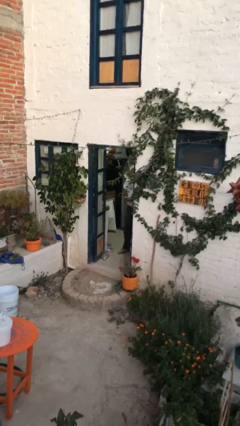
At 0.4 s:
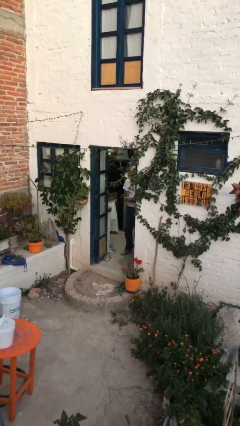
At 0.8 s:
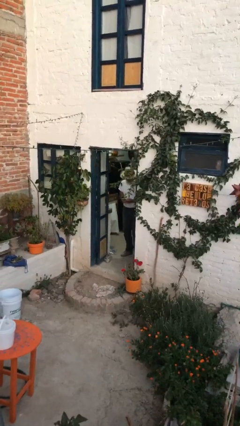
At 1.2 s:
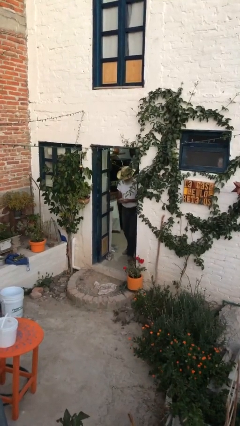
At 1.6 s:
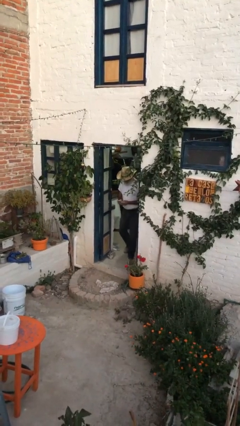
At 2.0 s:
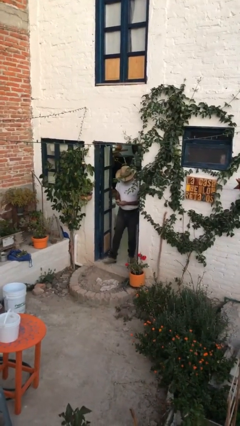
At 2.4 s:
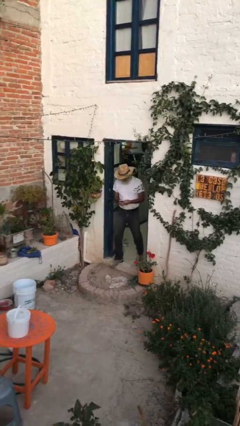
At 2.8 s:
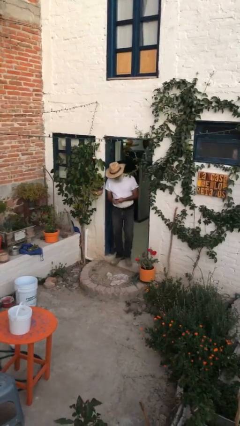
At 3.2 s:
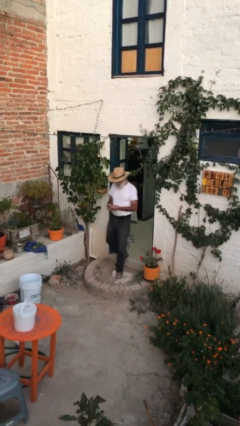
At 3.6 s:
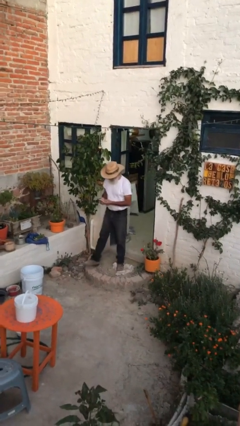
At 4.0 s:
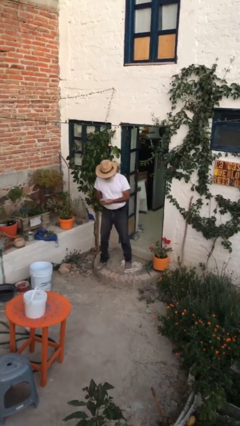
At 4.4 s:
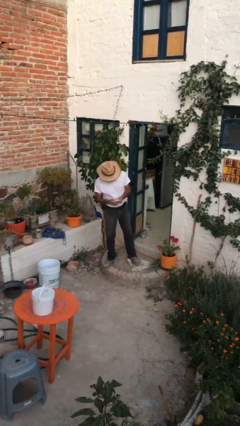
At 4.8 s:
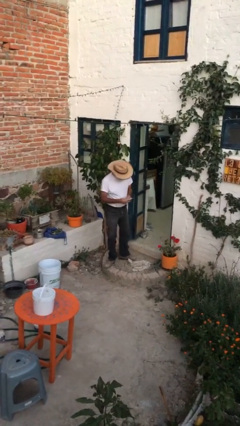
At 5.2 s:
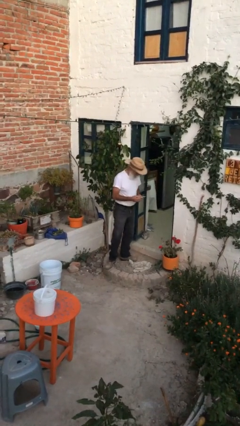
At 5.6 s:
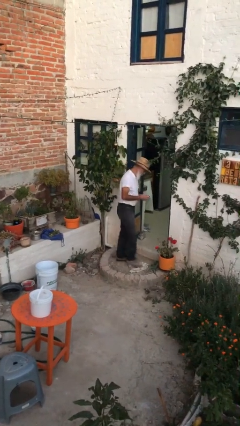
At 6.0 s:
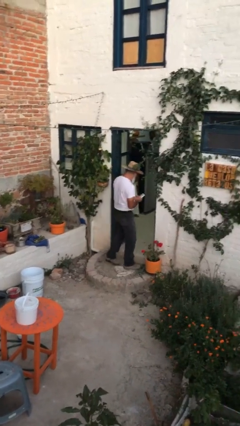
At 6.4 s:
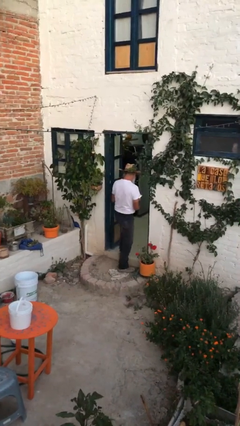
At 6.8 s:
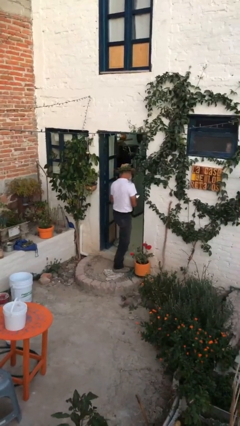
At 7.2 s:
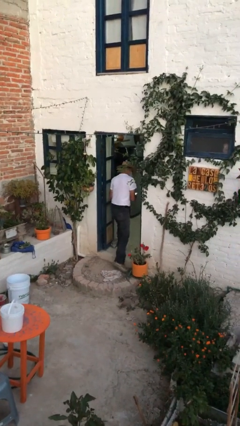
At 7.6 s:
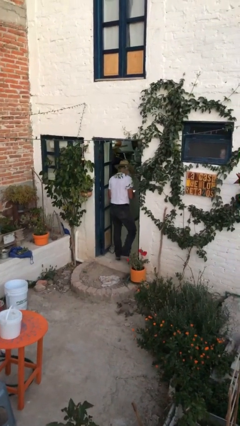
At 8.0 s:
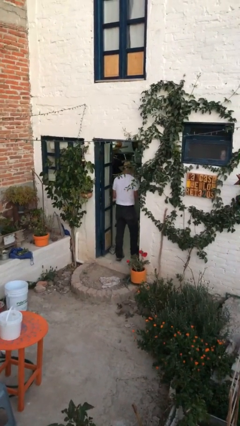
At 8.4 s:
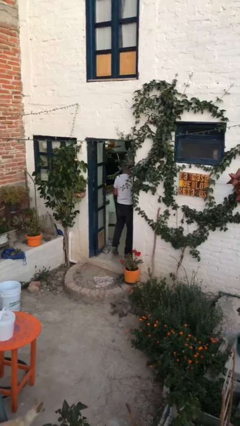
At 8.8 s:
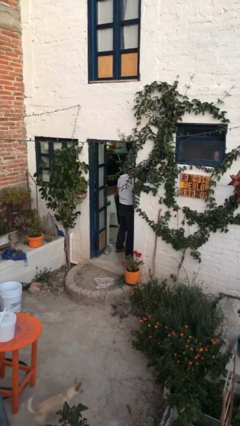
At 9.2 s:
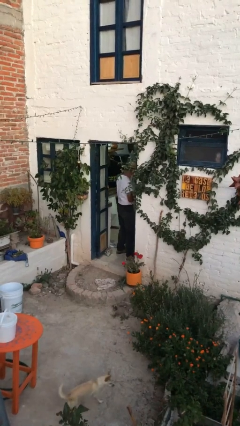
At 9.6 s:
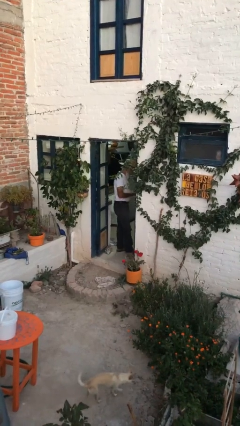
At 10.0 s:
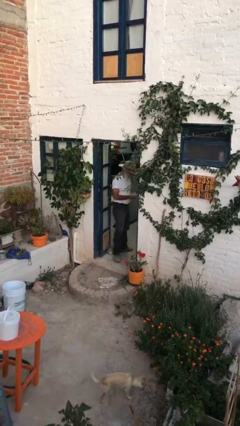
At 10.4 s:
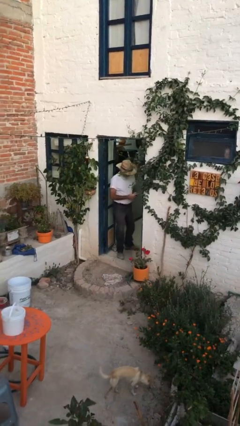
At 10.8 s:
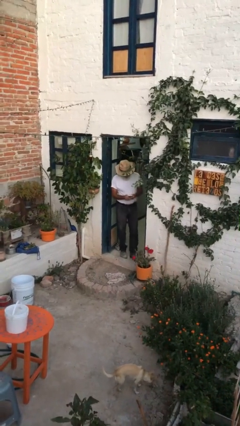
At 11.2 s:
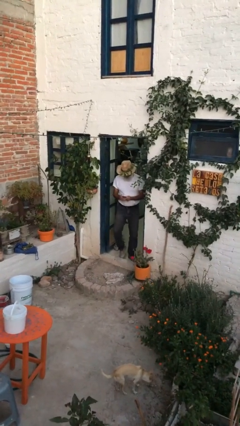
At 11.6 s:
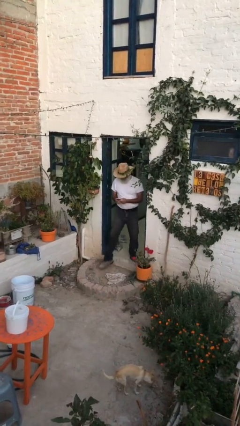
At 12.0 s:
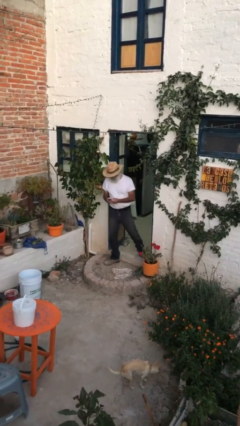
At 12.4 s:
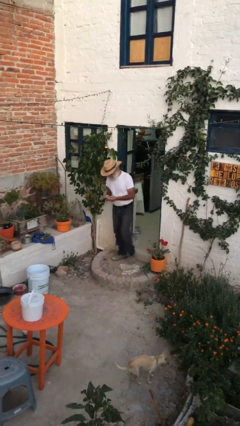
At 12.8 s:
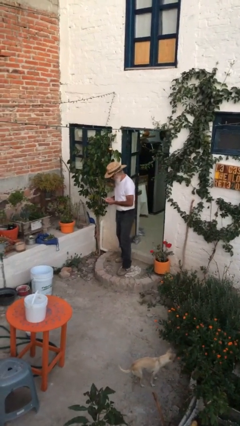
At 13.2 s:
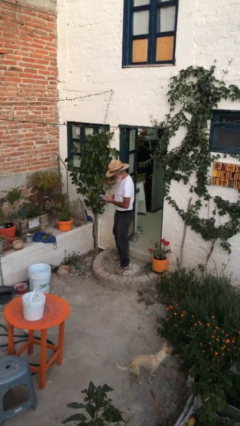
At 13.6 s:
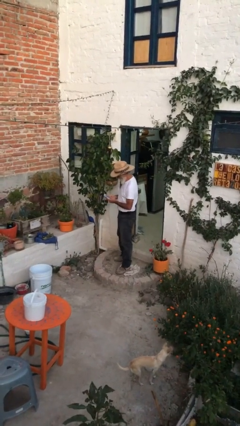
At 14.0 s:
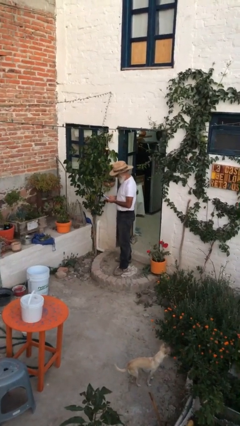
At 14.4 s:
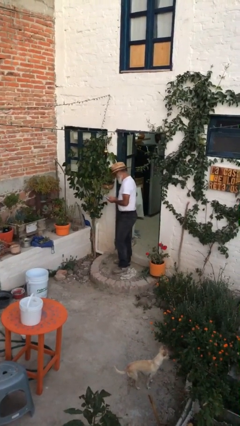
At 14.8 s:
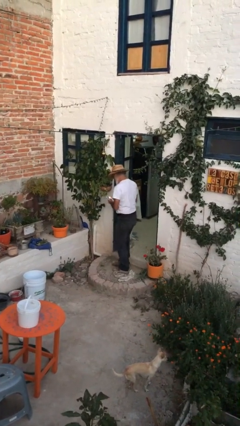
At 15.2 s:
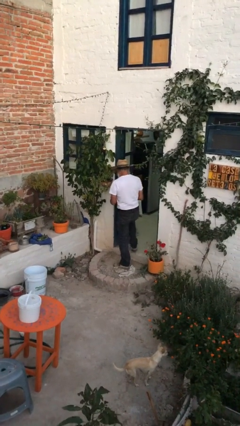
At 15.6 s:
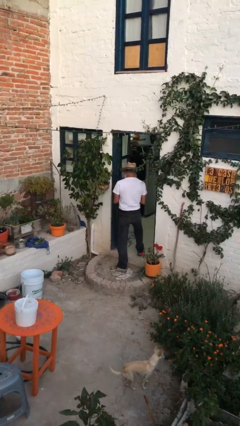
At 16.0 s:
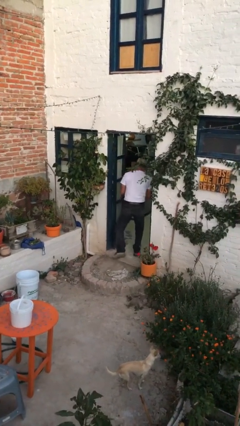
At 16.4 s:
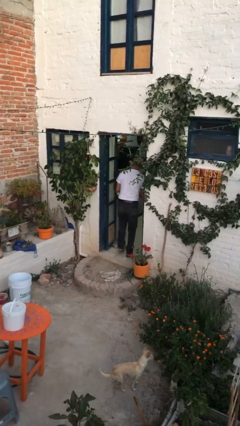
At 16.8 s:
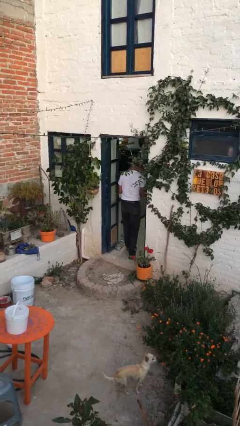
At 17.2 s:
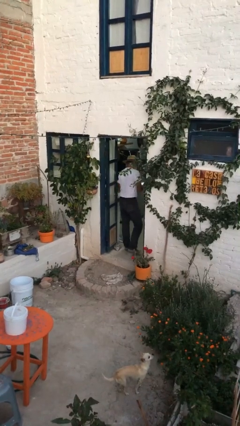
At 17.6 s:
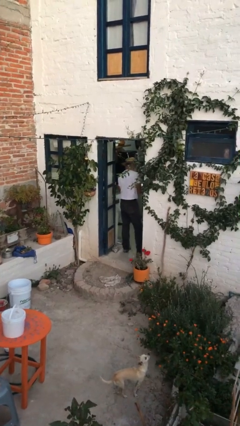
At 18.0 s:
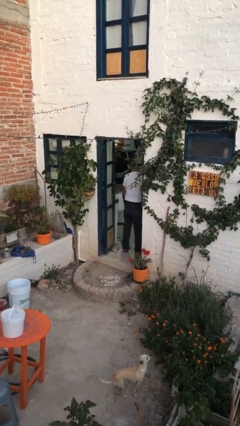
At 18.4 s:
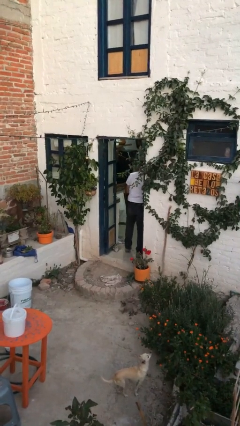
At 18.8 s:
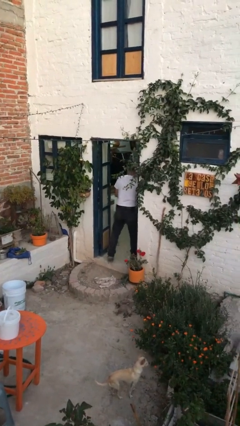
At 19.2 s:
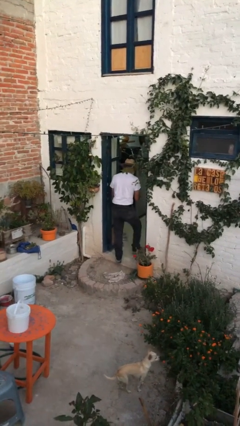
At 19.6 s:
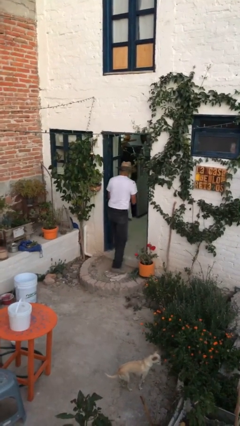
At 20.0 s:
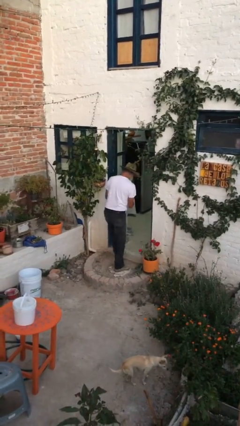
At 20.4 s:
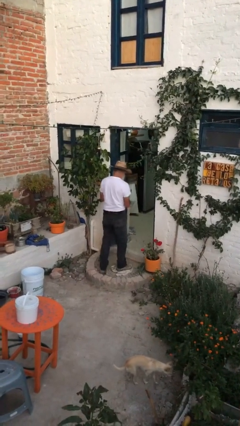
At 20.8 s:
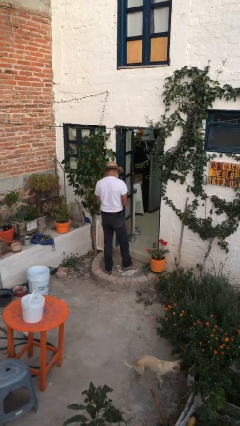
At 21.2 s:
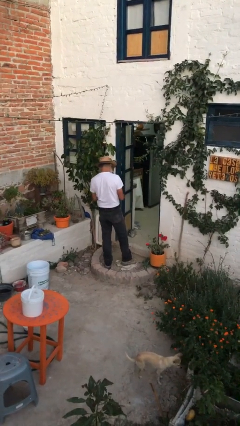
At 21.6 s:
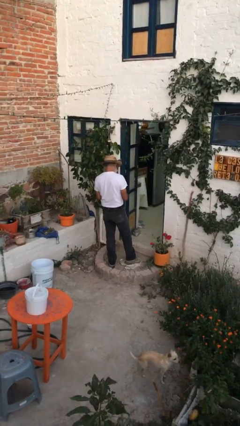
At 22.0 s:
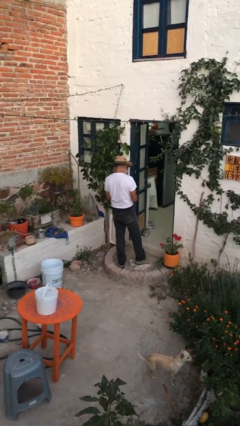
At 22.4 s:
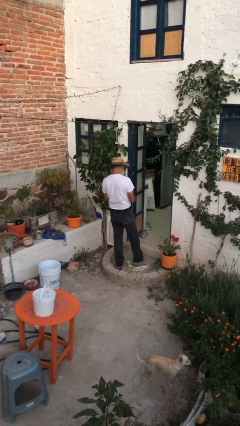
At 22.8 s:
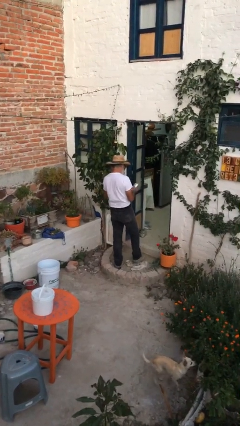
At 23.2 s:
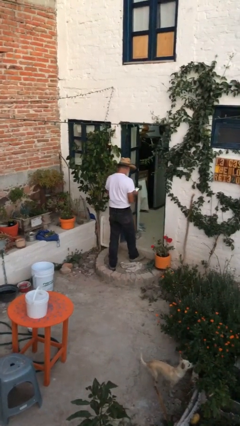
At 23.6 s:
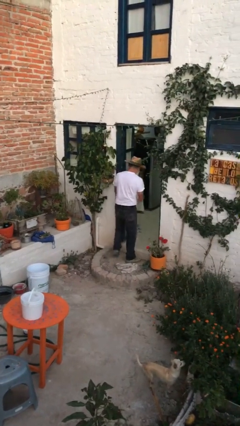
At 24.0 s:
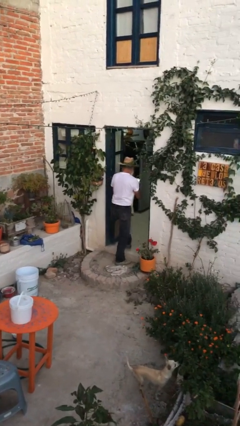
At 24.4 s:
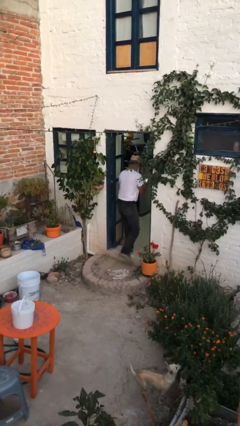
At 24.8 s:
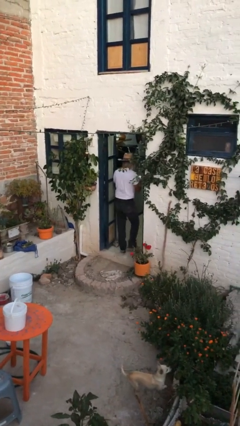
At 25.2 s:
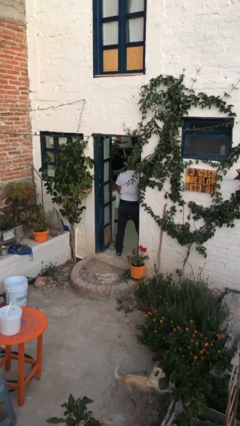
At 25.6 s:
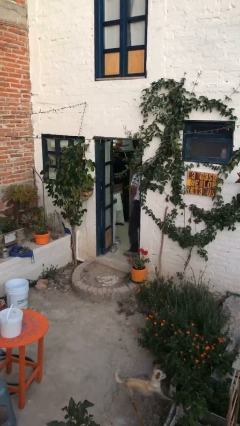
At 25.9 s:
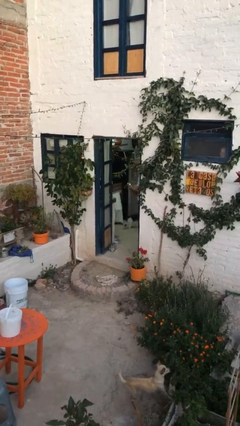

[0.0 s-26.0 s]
person texts on phone

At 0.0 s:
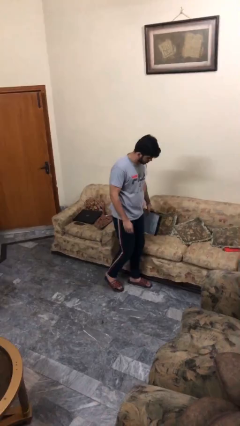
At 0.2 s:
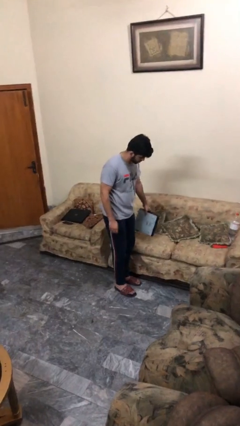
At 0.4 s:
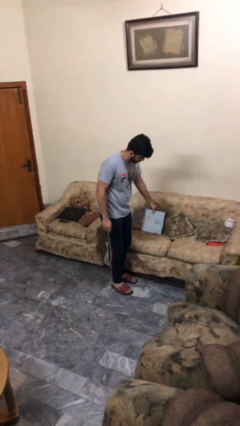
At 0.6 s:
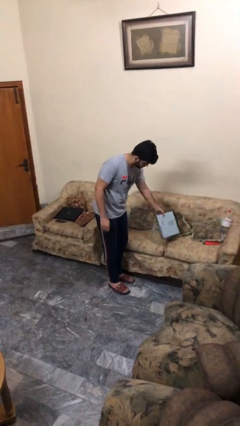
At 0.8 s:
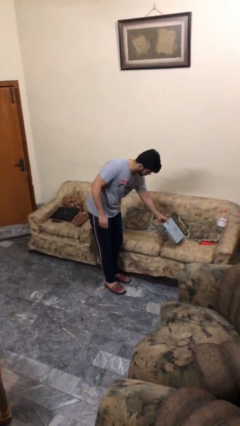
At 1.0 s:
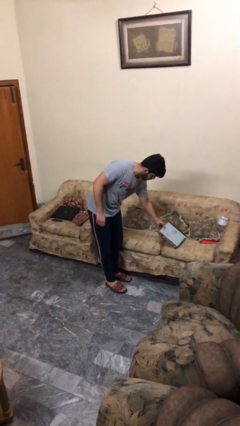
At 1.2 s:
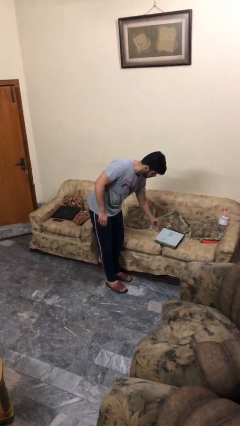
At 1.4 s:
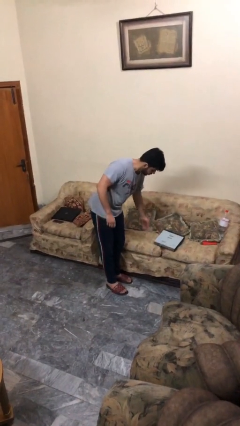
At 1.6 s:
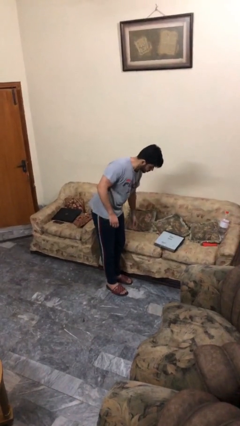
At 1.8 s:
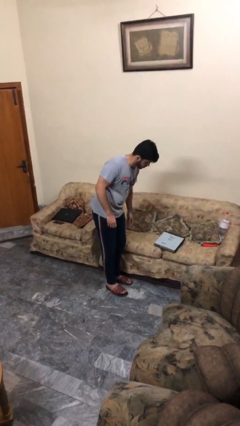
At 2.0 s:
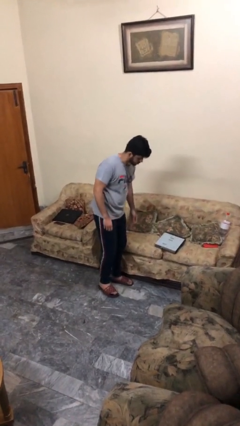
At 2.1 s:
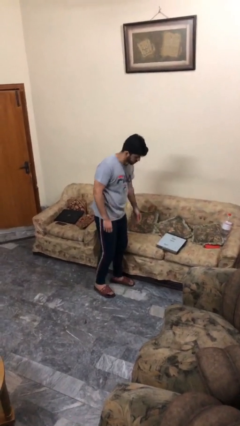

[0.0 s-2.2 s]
person puts down object on couch

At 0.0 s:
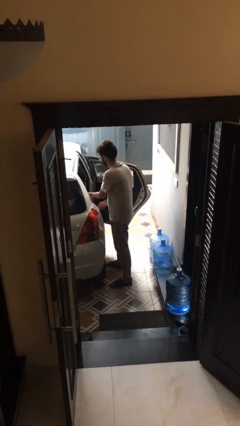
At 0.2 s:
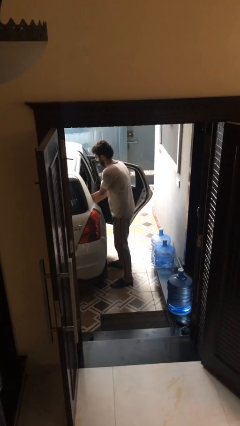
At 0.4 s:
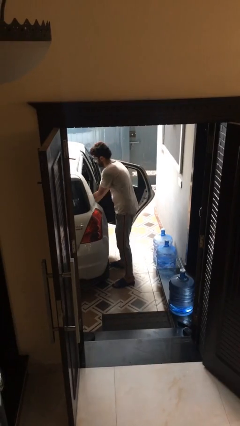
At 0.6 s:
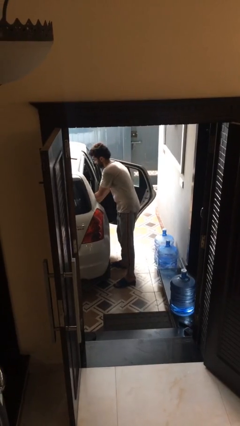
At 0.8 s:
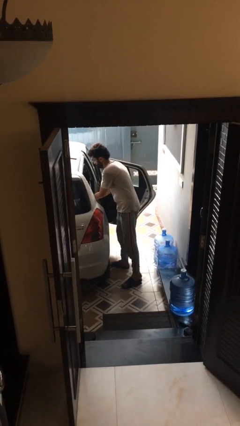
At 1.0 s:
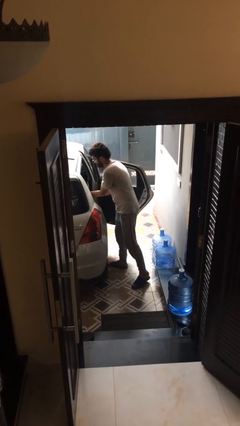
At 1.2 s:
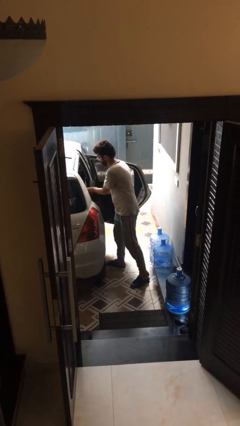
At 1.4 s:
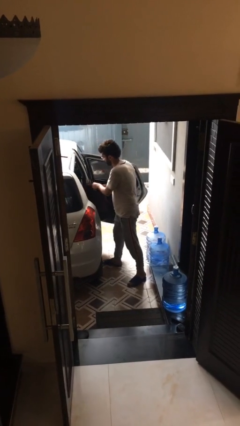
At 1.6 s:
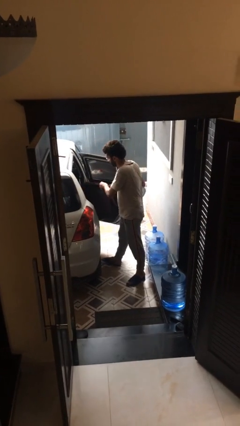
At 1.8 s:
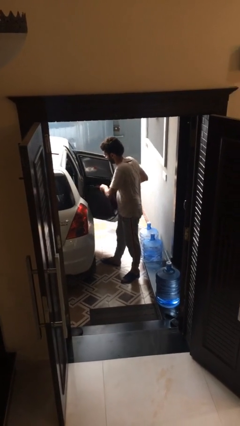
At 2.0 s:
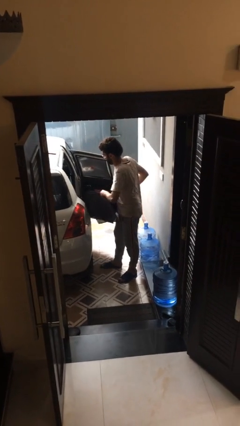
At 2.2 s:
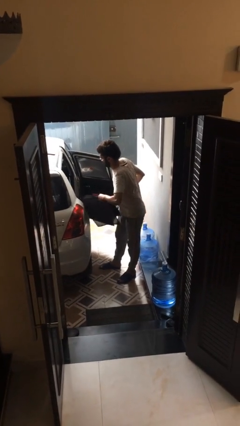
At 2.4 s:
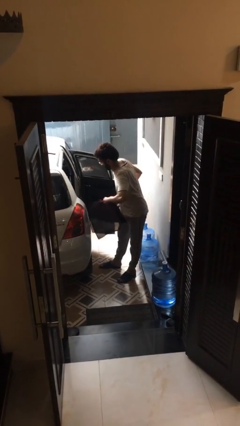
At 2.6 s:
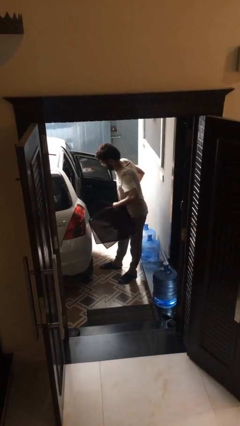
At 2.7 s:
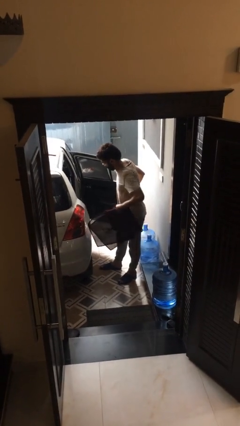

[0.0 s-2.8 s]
person unloads car
